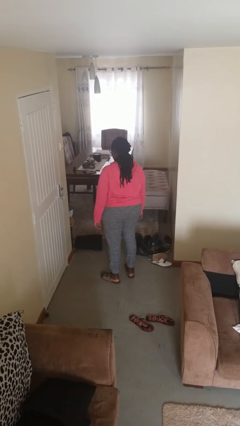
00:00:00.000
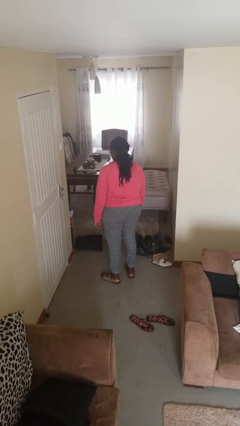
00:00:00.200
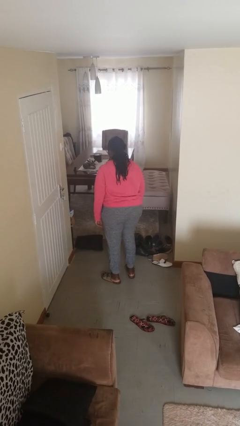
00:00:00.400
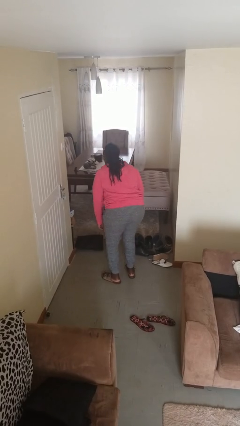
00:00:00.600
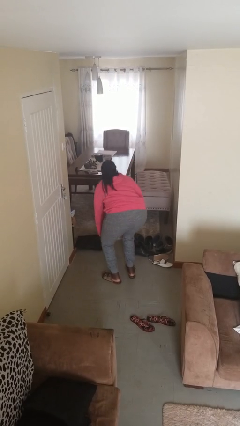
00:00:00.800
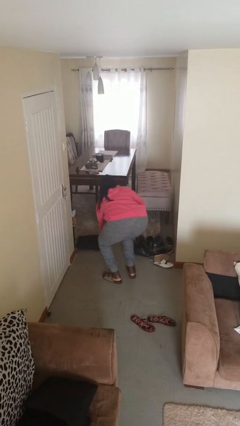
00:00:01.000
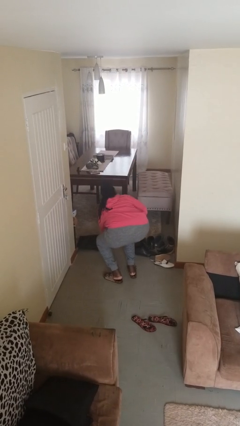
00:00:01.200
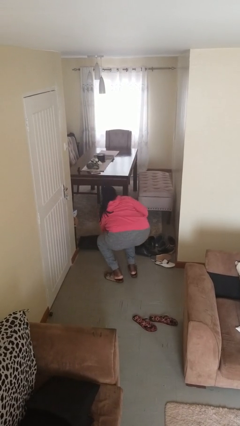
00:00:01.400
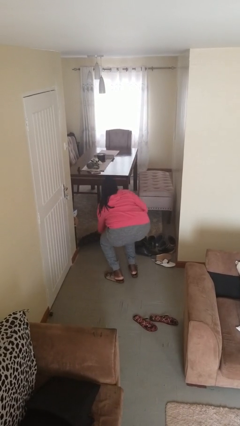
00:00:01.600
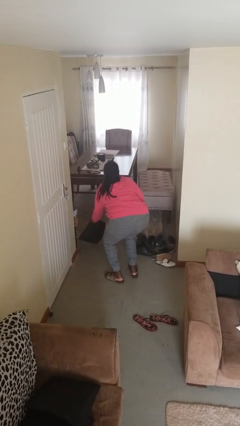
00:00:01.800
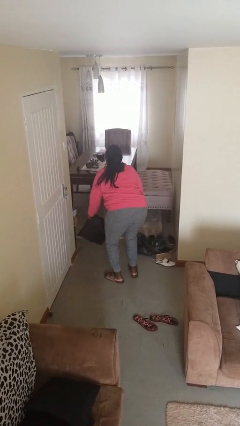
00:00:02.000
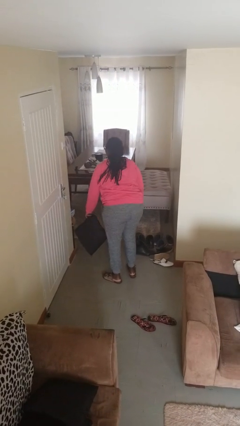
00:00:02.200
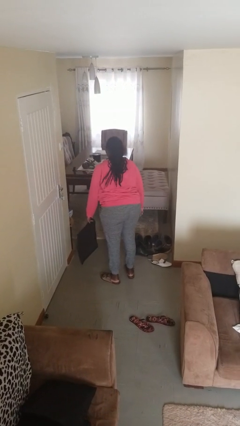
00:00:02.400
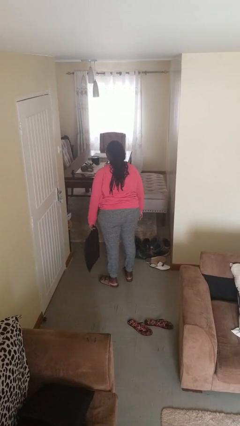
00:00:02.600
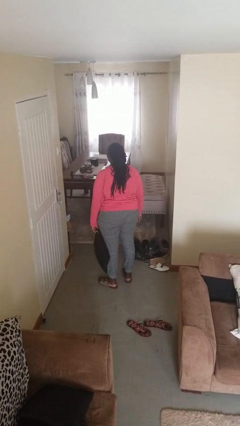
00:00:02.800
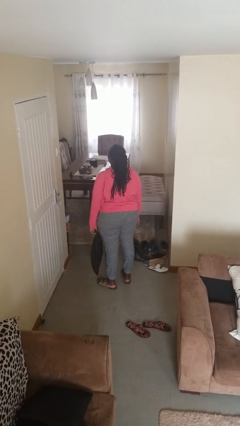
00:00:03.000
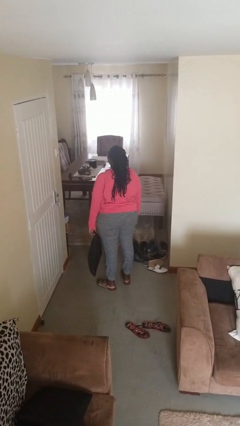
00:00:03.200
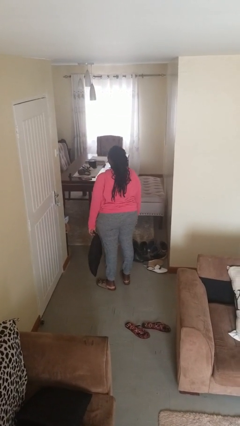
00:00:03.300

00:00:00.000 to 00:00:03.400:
person picks up object from floor

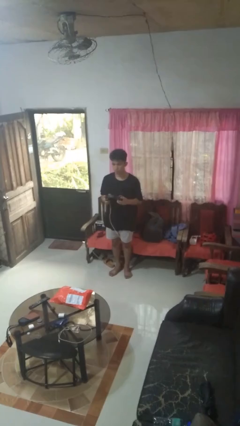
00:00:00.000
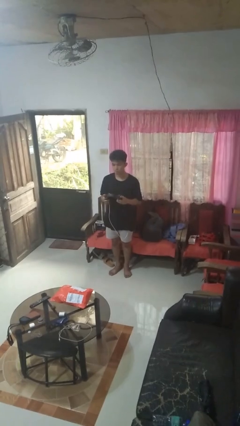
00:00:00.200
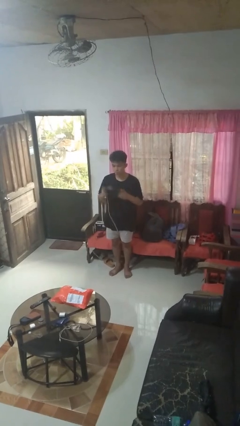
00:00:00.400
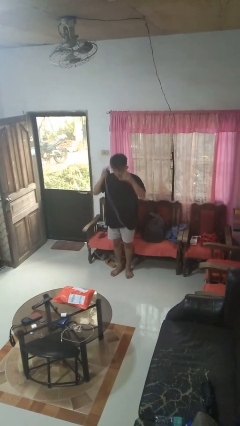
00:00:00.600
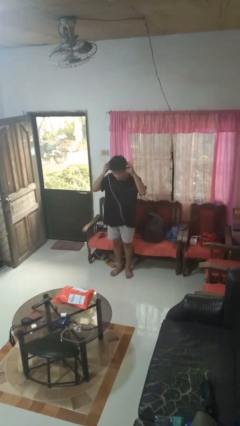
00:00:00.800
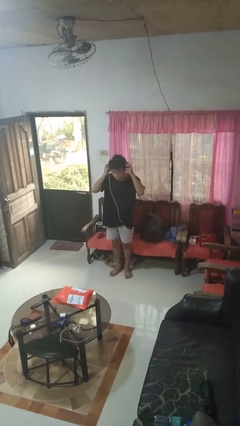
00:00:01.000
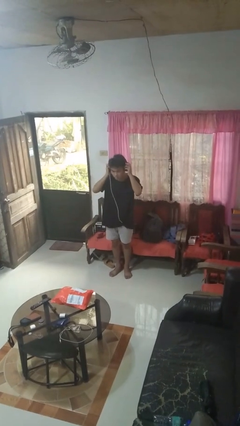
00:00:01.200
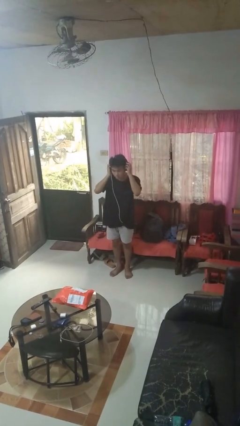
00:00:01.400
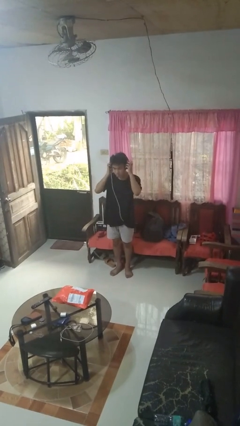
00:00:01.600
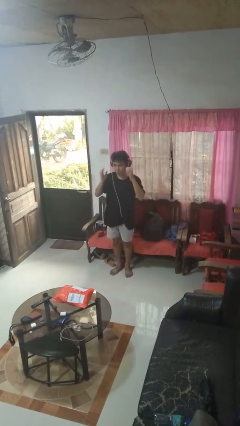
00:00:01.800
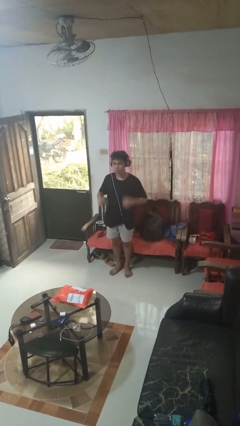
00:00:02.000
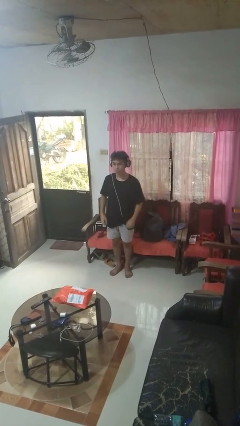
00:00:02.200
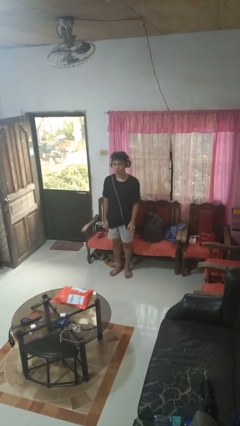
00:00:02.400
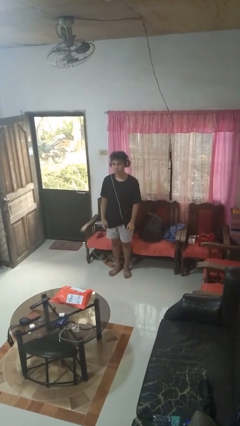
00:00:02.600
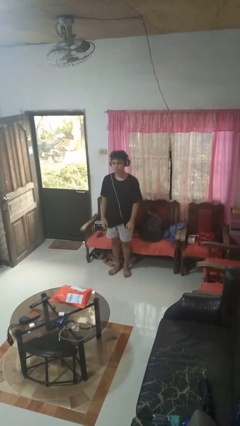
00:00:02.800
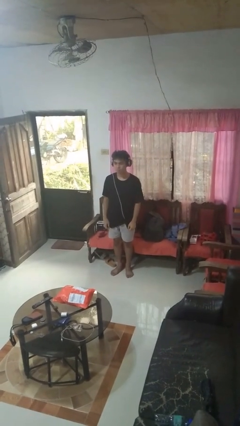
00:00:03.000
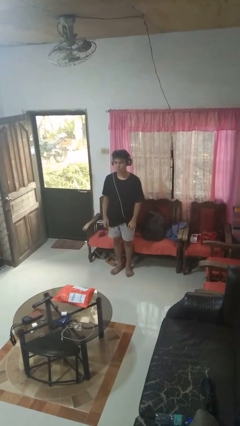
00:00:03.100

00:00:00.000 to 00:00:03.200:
person puts on headphones

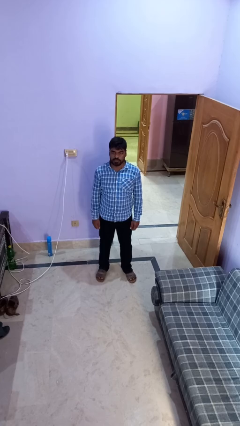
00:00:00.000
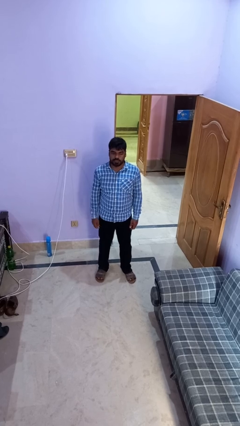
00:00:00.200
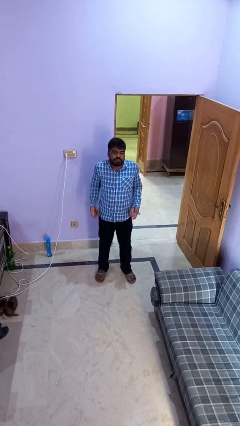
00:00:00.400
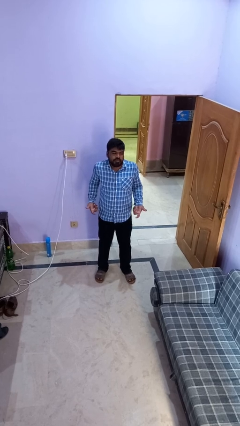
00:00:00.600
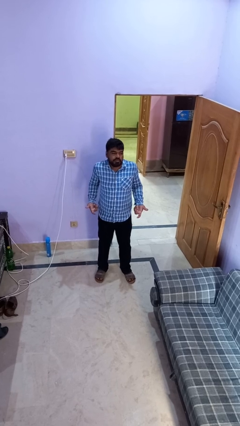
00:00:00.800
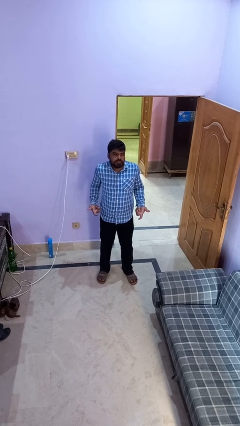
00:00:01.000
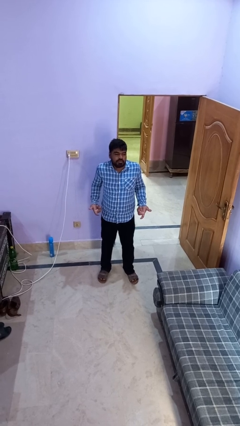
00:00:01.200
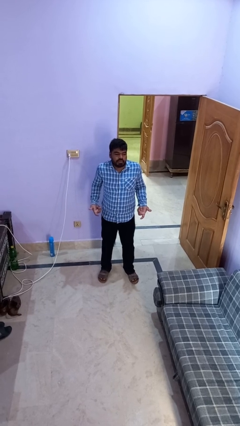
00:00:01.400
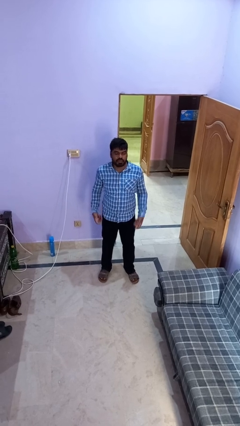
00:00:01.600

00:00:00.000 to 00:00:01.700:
person shrugs

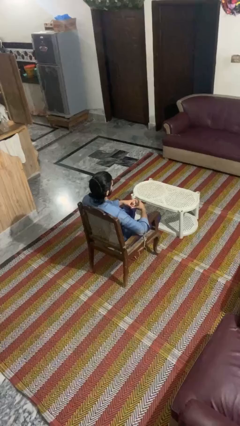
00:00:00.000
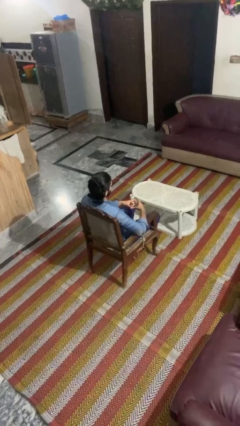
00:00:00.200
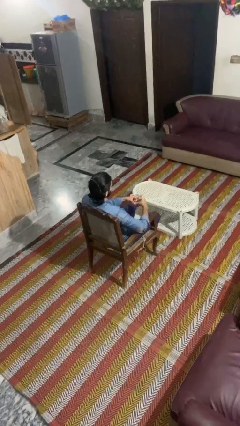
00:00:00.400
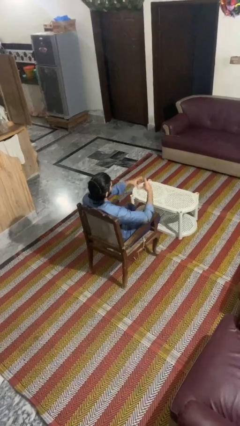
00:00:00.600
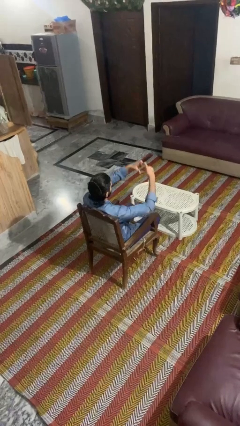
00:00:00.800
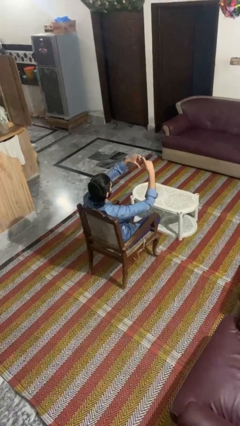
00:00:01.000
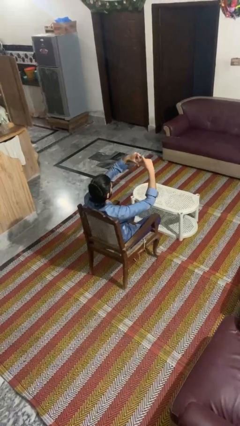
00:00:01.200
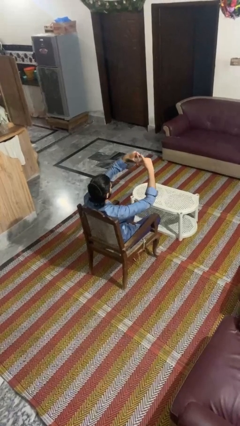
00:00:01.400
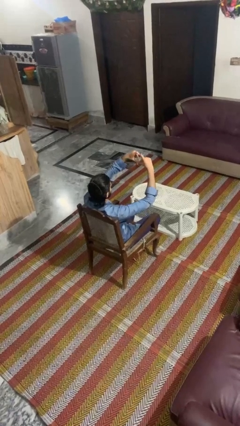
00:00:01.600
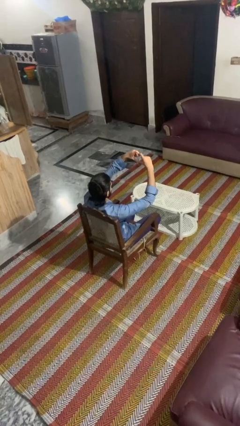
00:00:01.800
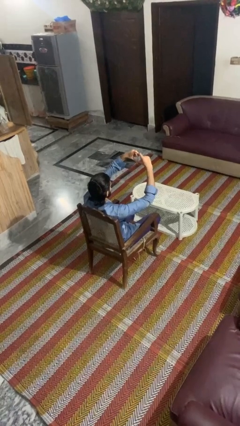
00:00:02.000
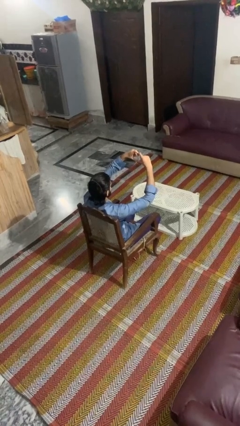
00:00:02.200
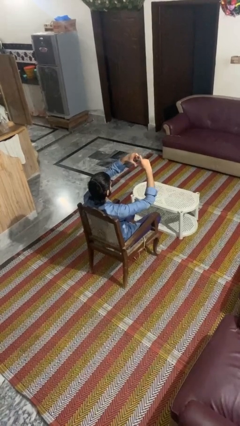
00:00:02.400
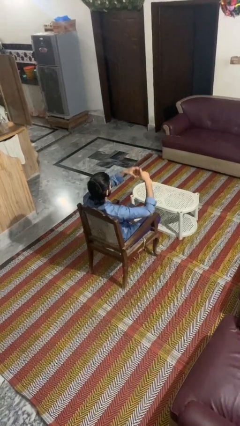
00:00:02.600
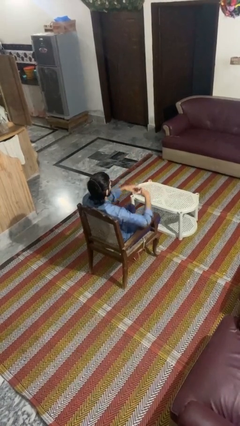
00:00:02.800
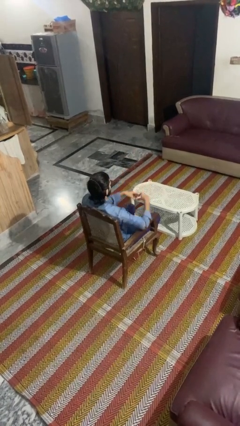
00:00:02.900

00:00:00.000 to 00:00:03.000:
person gestures heart

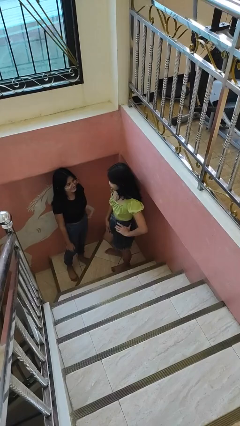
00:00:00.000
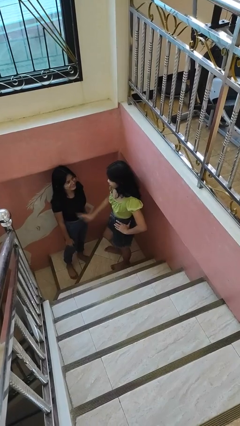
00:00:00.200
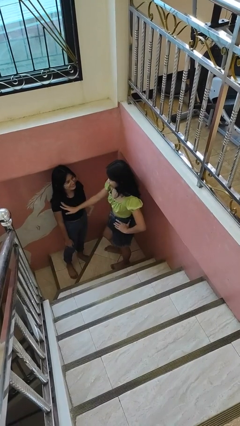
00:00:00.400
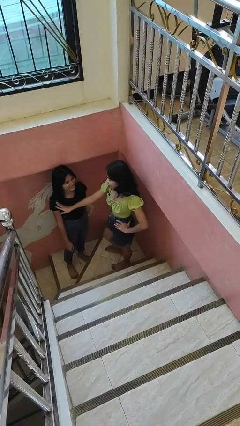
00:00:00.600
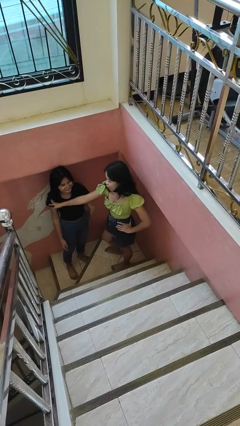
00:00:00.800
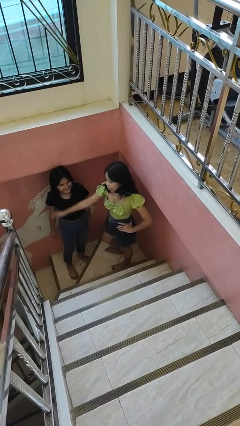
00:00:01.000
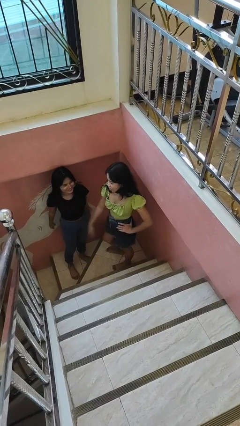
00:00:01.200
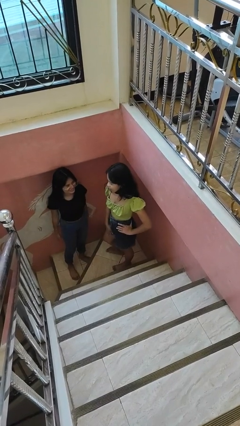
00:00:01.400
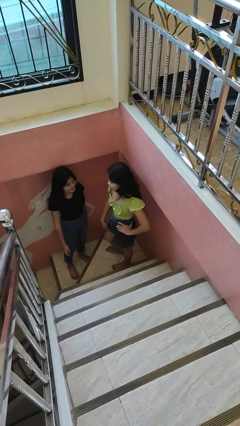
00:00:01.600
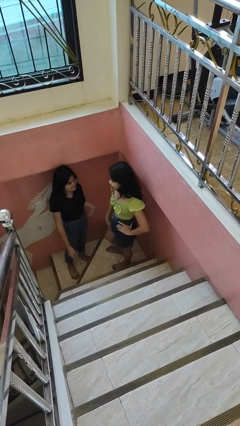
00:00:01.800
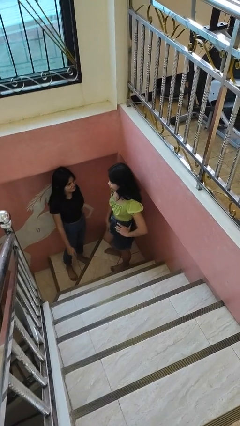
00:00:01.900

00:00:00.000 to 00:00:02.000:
person shoves person

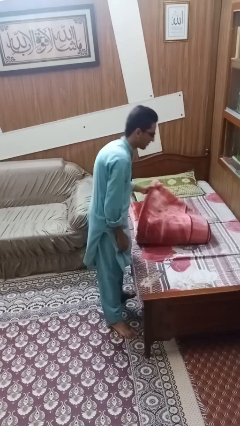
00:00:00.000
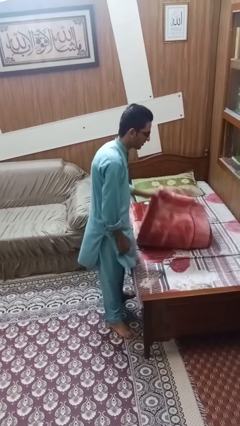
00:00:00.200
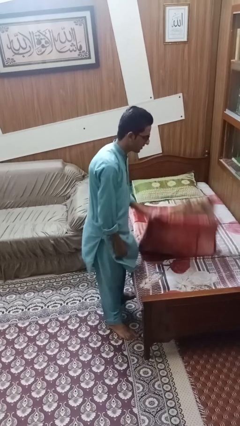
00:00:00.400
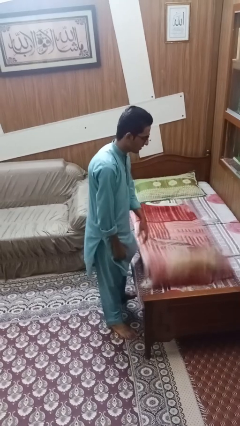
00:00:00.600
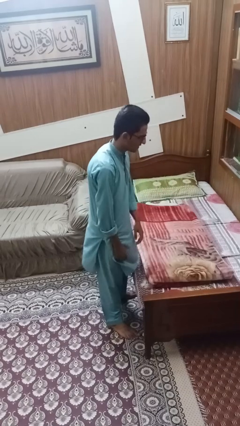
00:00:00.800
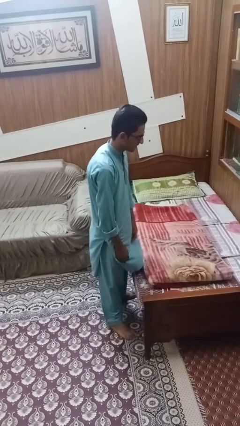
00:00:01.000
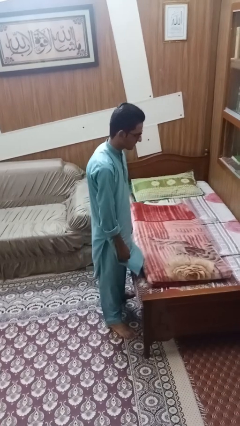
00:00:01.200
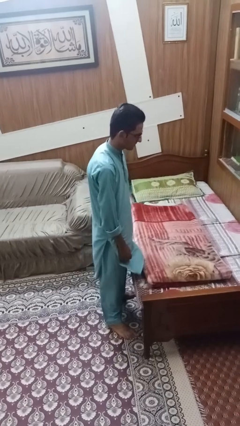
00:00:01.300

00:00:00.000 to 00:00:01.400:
person unfolds blanket

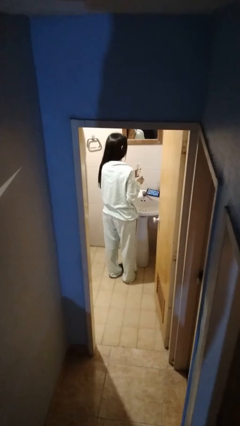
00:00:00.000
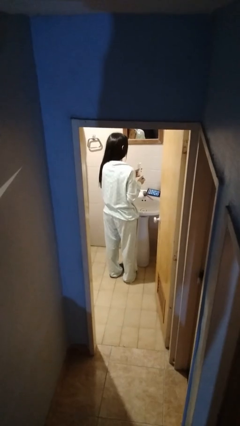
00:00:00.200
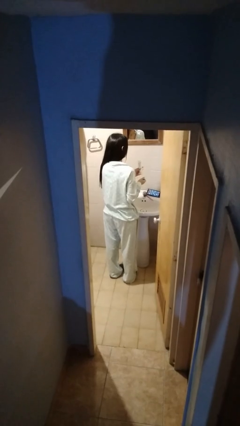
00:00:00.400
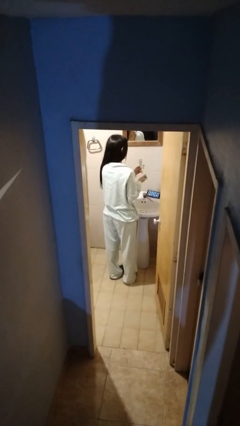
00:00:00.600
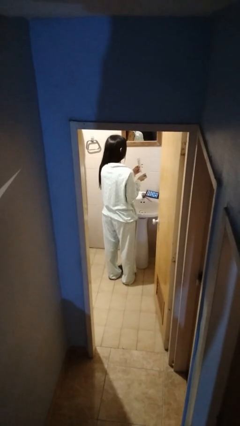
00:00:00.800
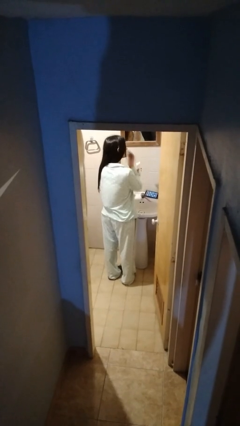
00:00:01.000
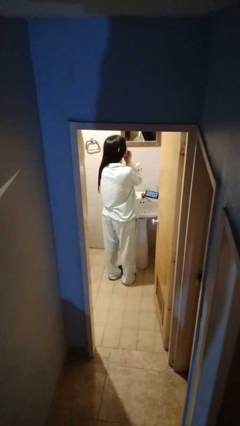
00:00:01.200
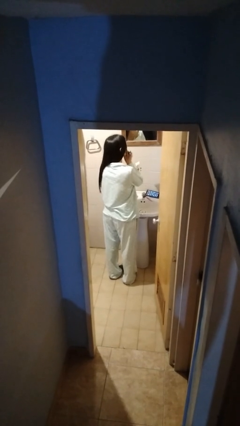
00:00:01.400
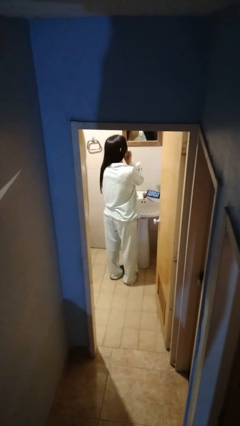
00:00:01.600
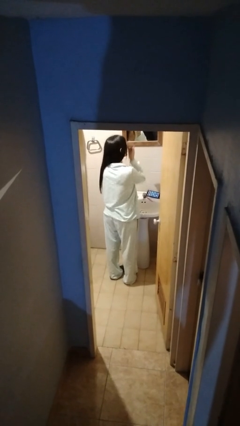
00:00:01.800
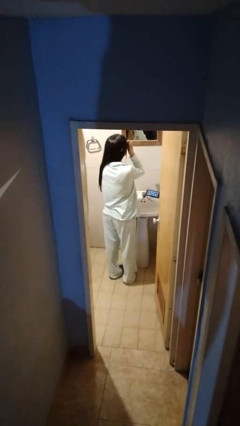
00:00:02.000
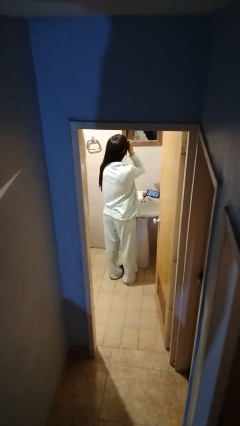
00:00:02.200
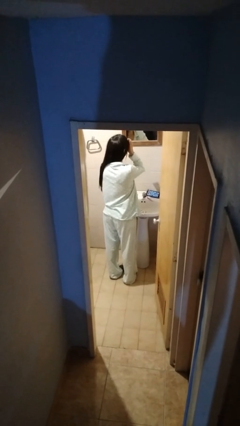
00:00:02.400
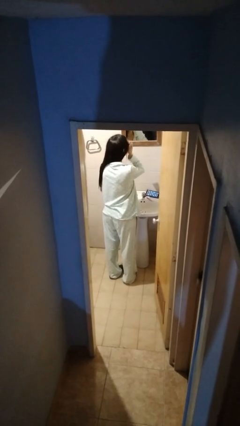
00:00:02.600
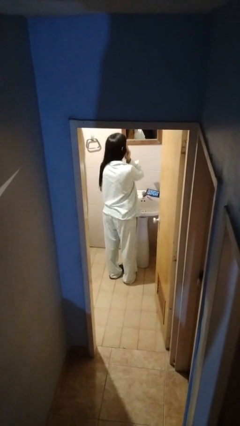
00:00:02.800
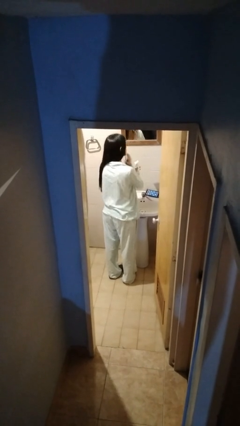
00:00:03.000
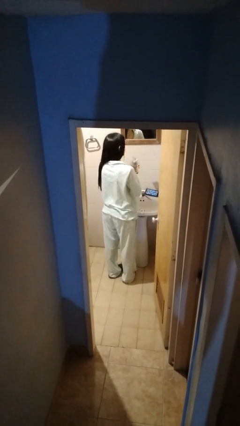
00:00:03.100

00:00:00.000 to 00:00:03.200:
person applies facial moisturizer
